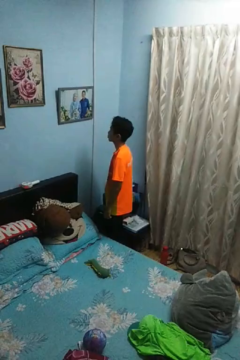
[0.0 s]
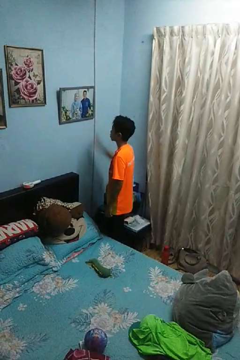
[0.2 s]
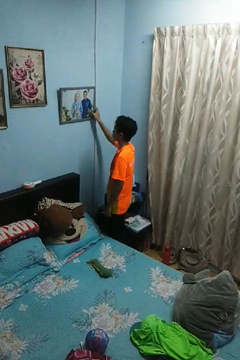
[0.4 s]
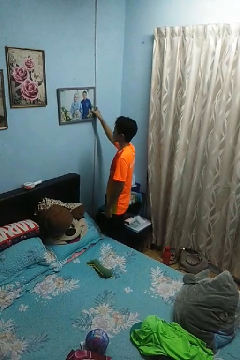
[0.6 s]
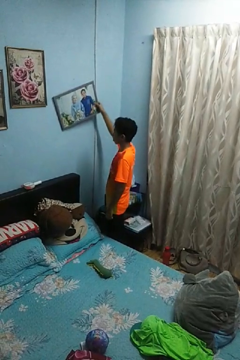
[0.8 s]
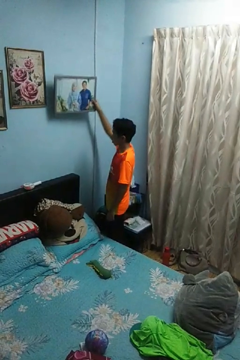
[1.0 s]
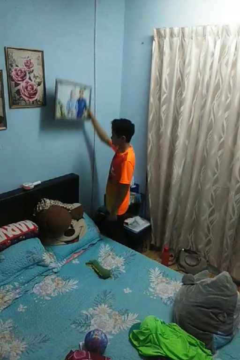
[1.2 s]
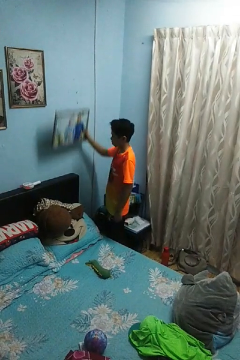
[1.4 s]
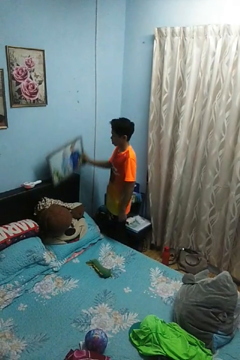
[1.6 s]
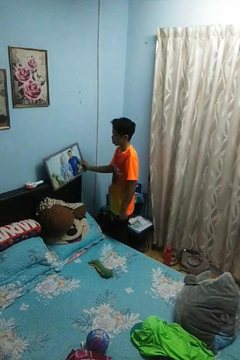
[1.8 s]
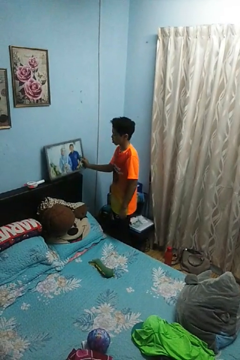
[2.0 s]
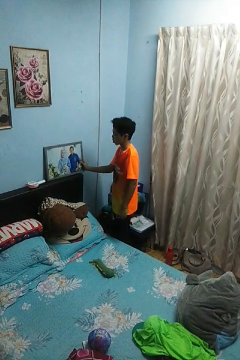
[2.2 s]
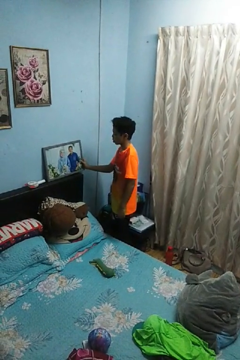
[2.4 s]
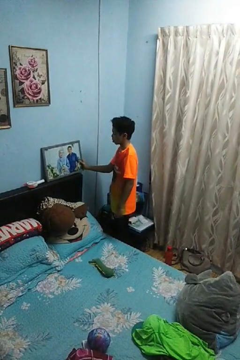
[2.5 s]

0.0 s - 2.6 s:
person takes down picture frame

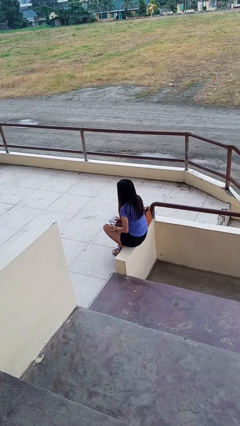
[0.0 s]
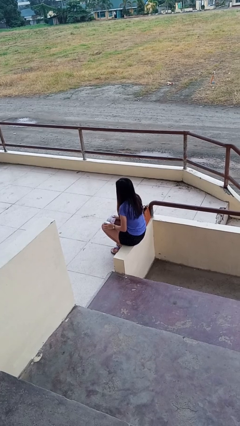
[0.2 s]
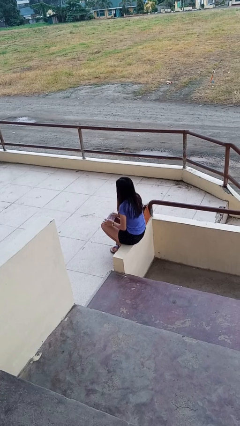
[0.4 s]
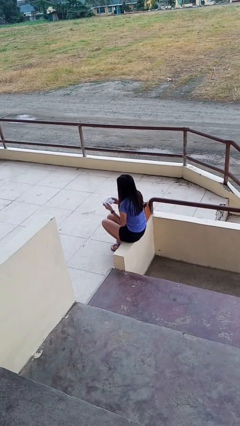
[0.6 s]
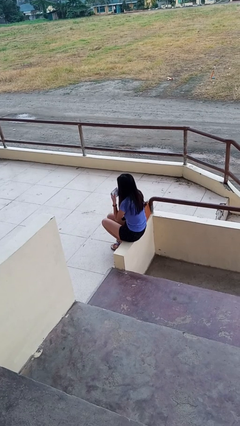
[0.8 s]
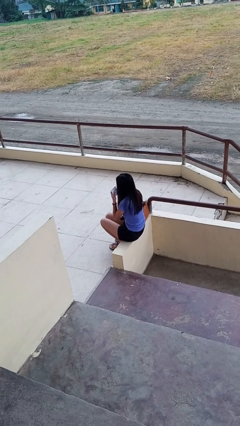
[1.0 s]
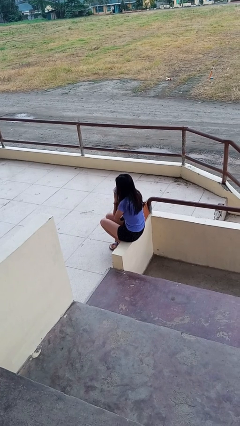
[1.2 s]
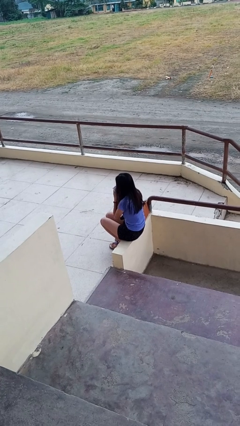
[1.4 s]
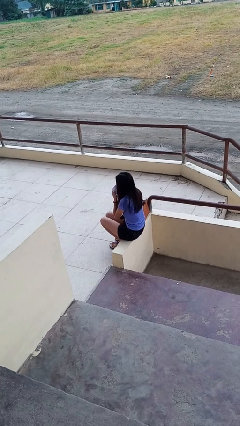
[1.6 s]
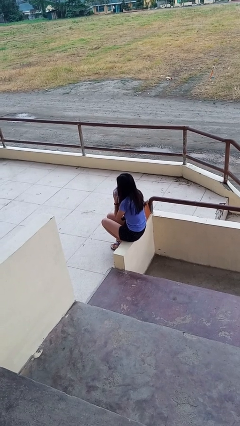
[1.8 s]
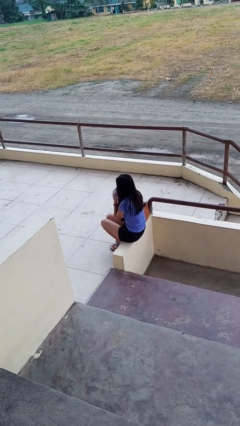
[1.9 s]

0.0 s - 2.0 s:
person wipes mouth with napkin

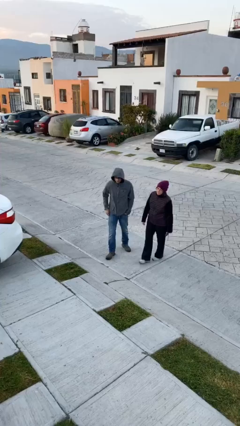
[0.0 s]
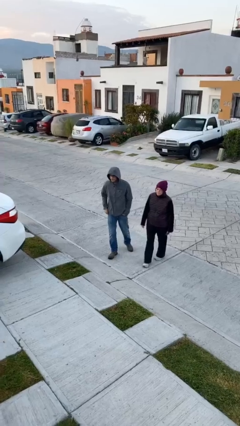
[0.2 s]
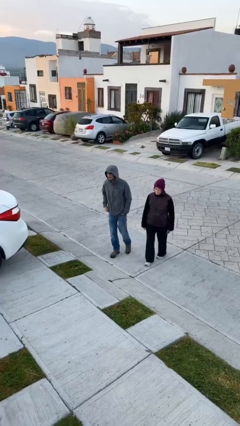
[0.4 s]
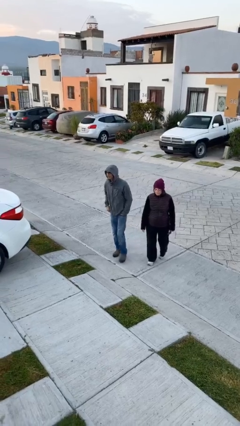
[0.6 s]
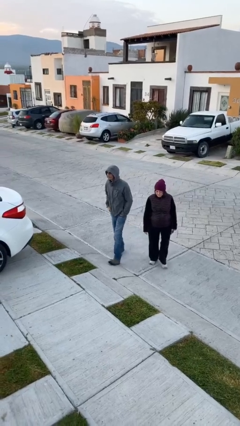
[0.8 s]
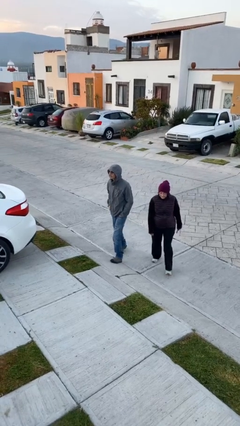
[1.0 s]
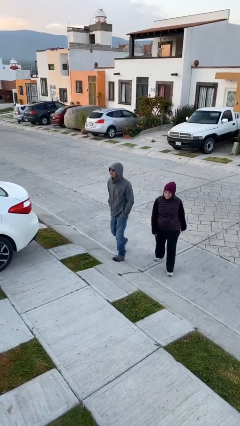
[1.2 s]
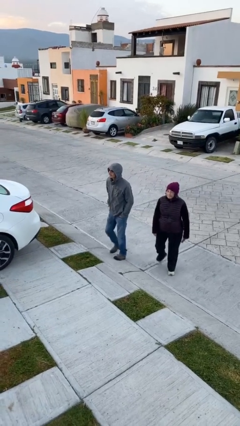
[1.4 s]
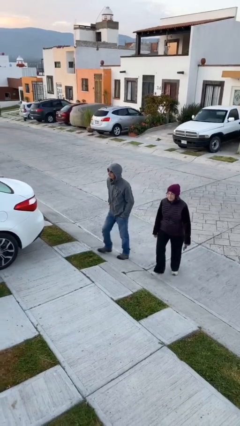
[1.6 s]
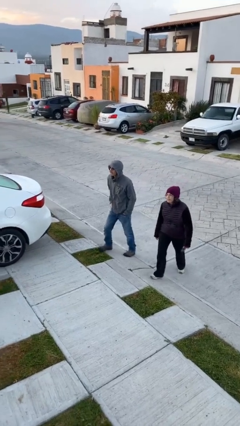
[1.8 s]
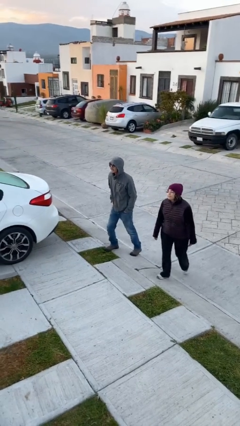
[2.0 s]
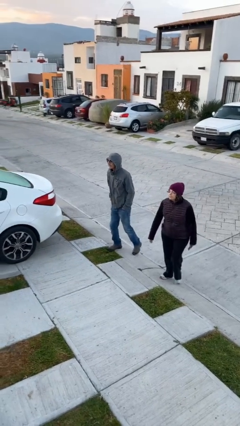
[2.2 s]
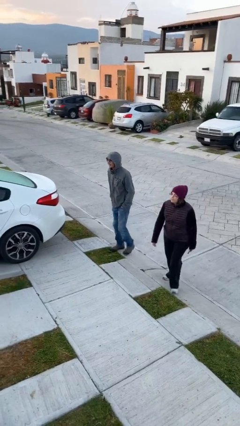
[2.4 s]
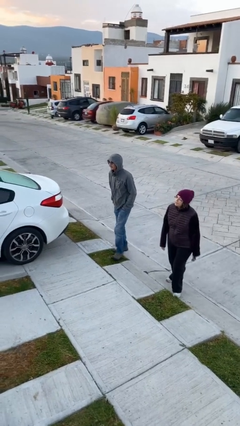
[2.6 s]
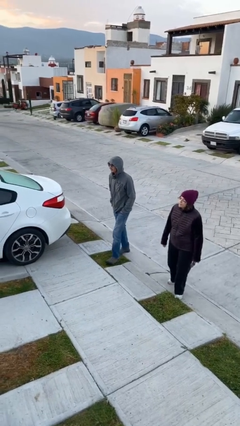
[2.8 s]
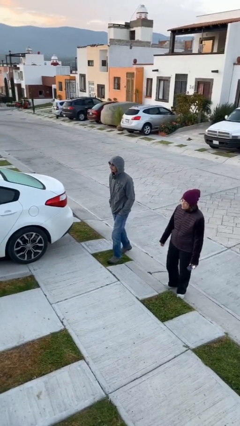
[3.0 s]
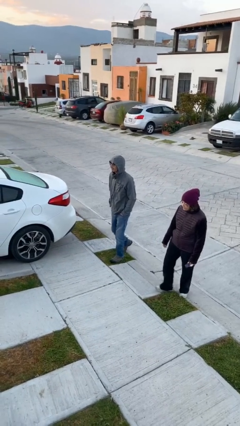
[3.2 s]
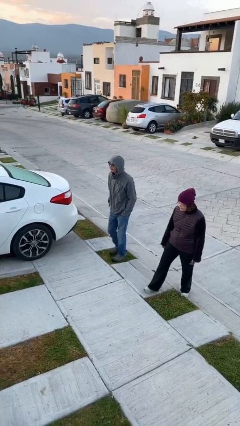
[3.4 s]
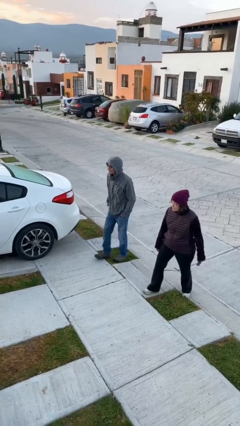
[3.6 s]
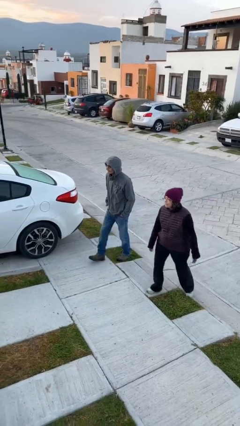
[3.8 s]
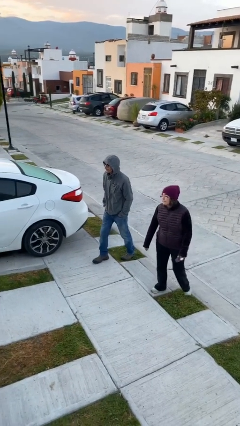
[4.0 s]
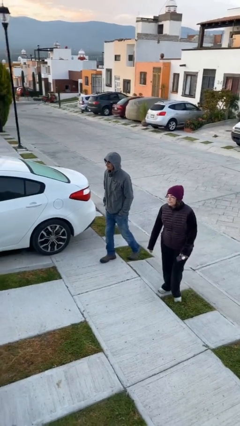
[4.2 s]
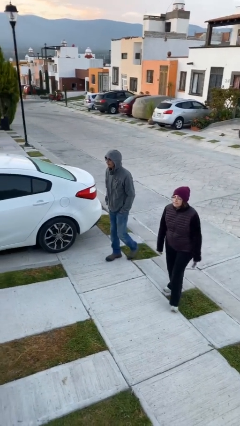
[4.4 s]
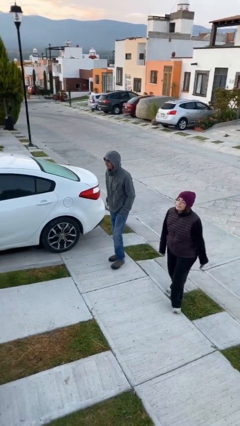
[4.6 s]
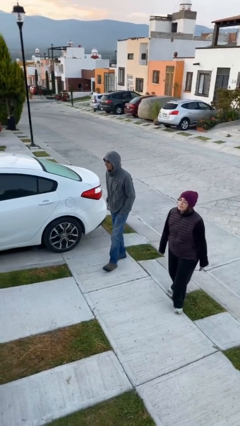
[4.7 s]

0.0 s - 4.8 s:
person talks to person

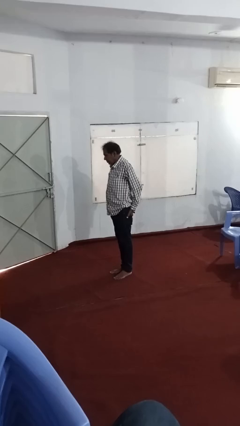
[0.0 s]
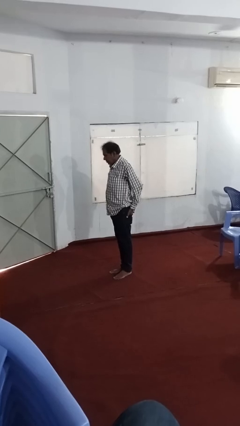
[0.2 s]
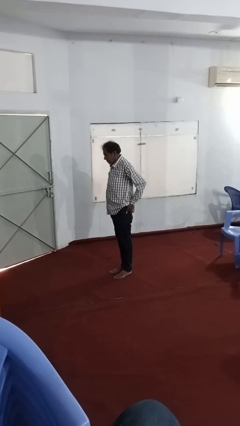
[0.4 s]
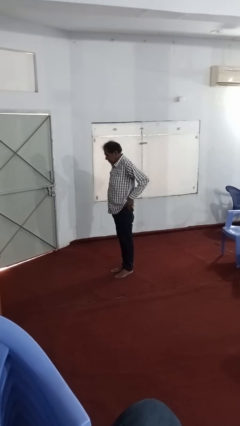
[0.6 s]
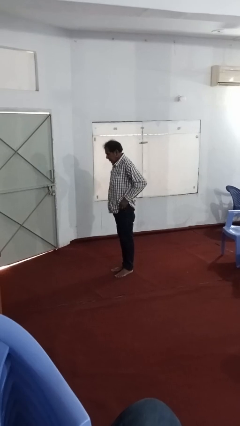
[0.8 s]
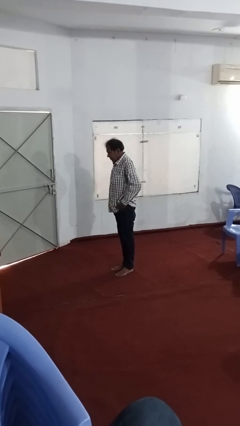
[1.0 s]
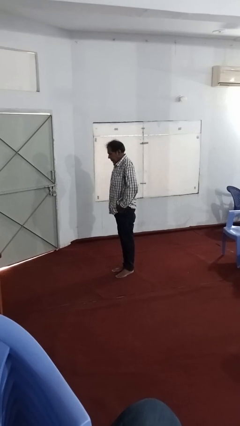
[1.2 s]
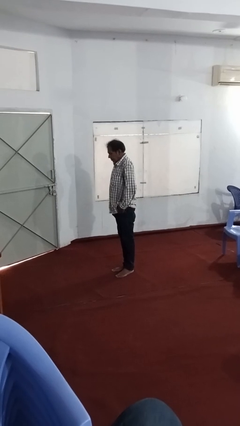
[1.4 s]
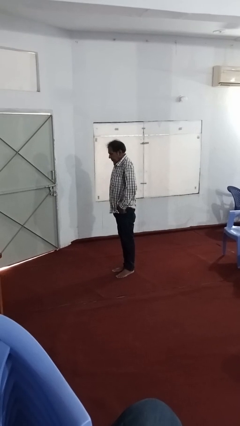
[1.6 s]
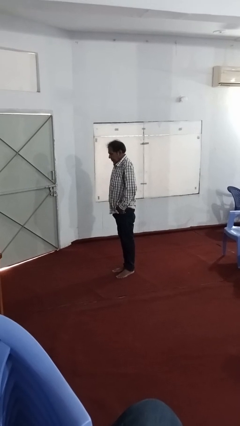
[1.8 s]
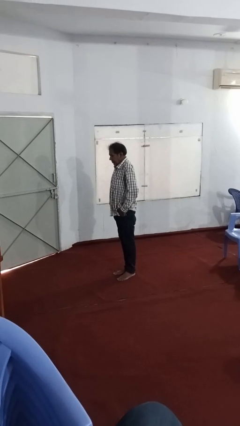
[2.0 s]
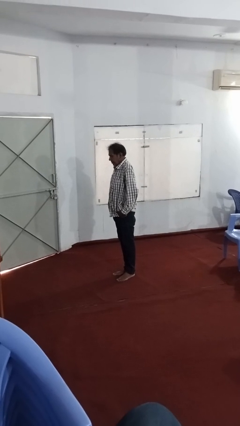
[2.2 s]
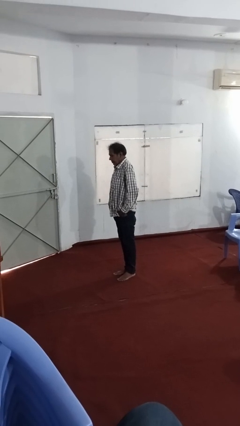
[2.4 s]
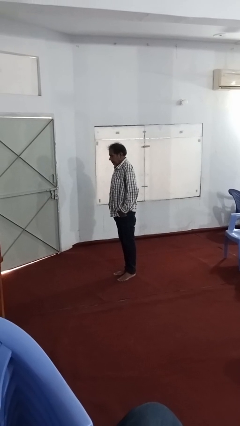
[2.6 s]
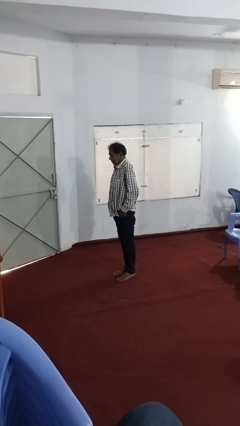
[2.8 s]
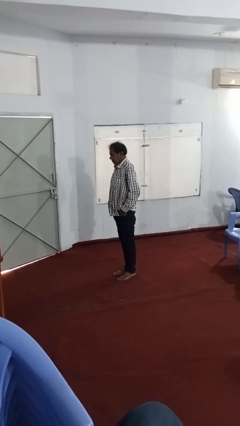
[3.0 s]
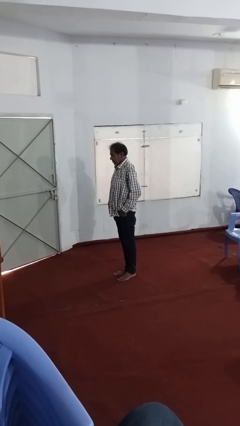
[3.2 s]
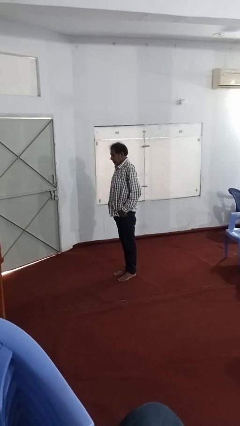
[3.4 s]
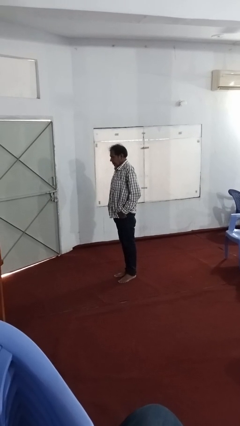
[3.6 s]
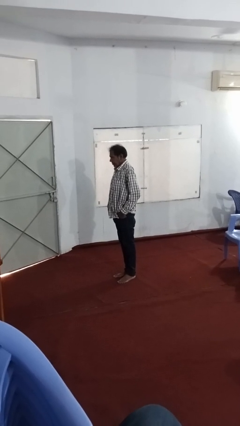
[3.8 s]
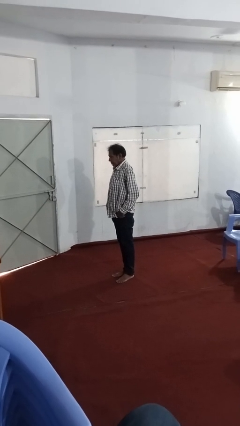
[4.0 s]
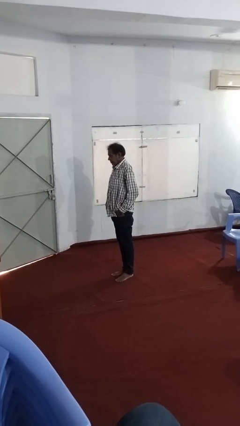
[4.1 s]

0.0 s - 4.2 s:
person puts hands in back pockets

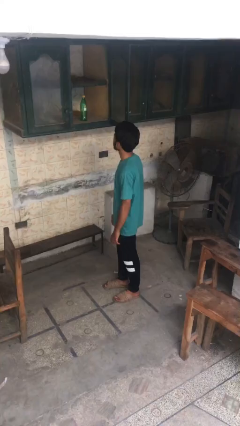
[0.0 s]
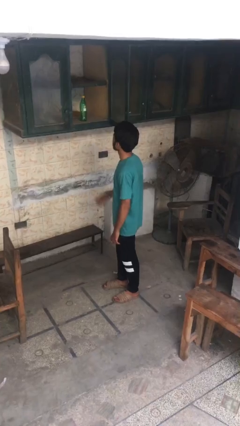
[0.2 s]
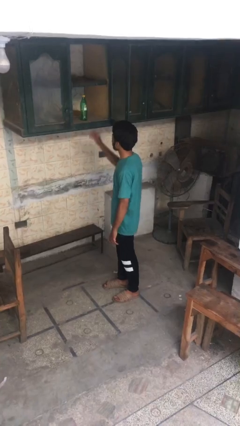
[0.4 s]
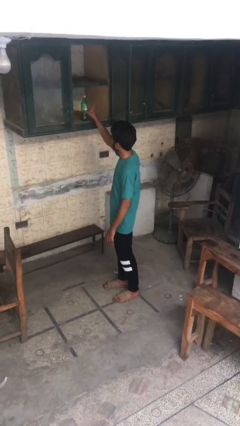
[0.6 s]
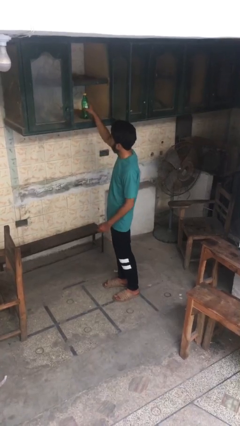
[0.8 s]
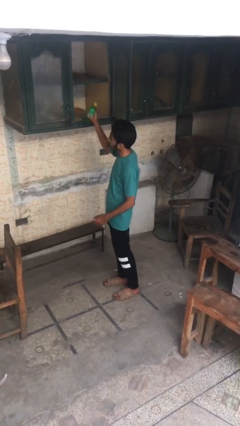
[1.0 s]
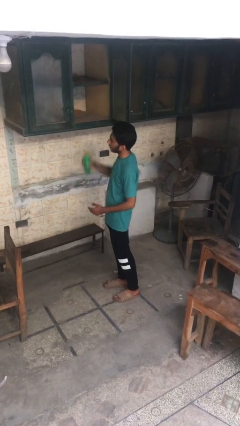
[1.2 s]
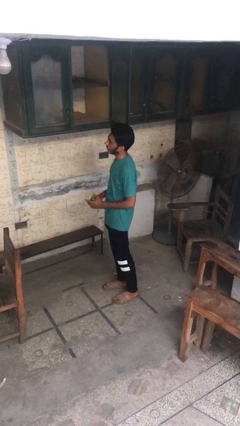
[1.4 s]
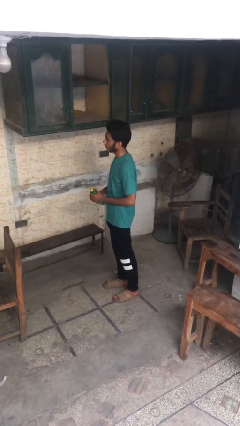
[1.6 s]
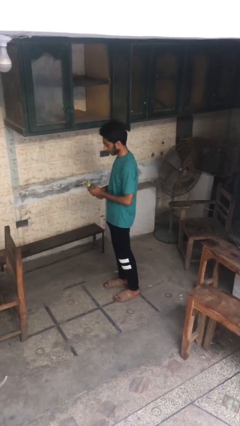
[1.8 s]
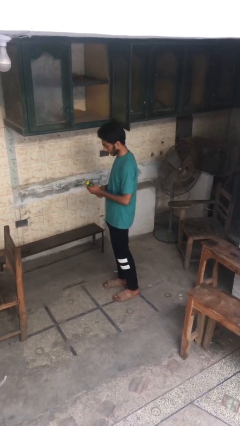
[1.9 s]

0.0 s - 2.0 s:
person takes object from cabinet

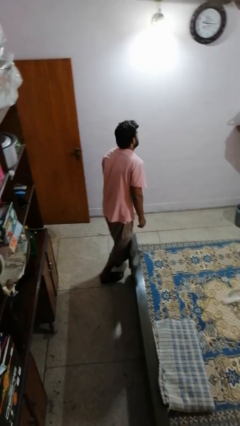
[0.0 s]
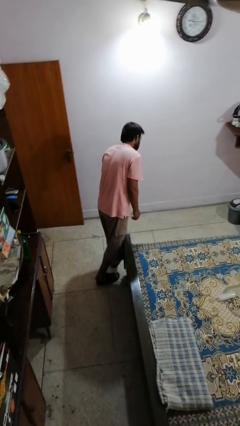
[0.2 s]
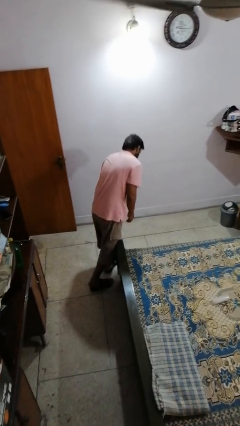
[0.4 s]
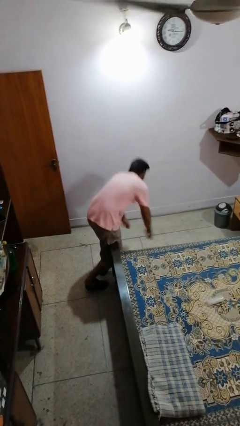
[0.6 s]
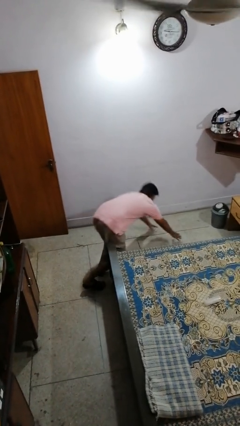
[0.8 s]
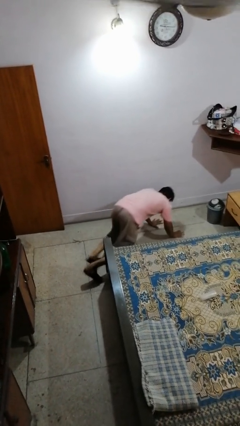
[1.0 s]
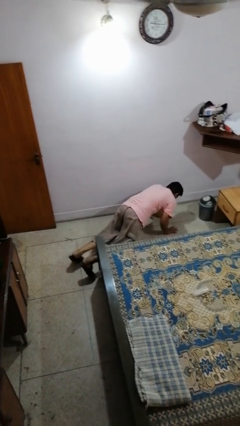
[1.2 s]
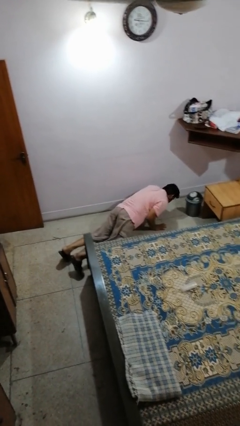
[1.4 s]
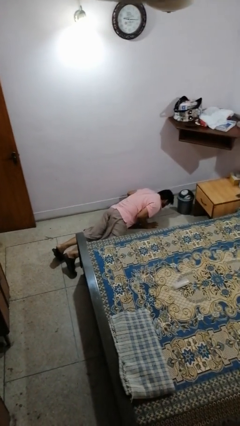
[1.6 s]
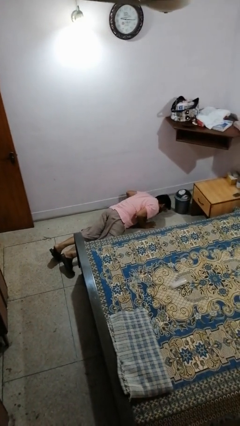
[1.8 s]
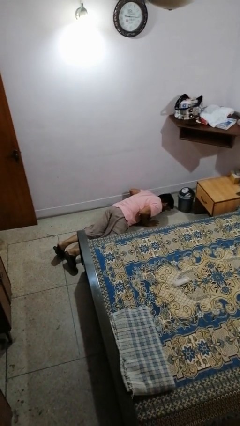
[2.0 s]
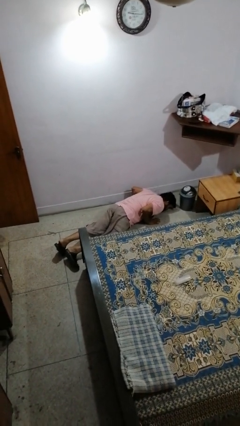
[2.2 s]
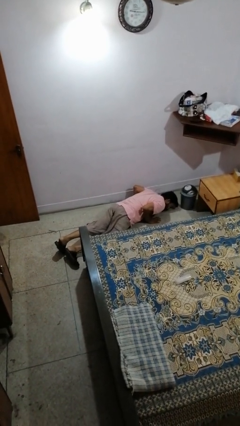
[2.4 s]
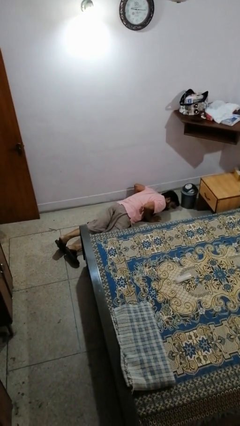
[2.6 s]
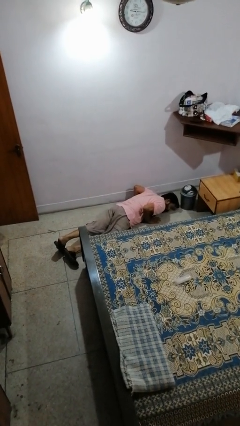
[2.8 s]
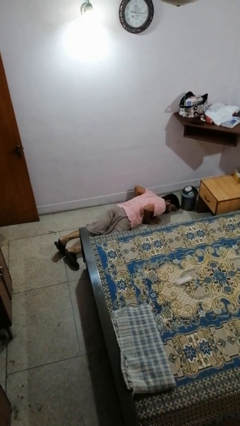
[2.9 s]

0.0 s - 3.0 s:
person lies down on floor
